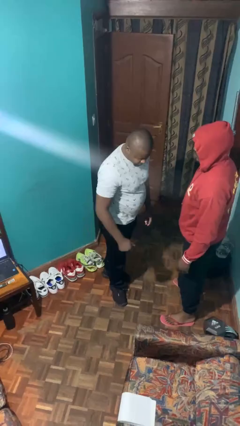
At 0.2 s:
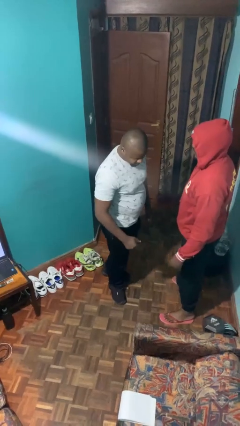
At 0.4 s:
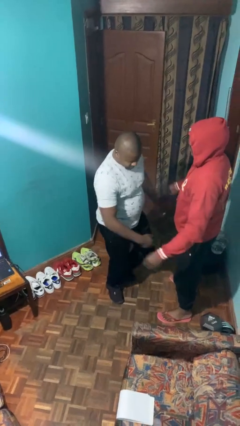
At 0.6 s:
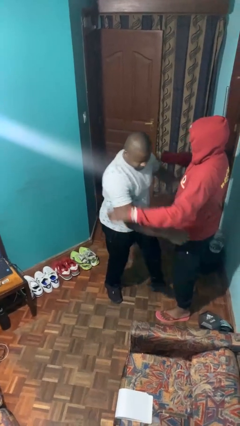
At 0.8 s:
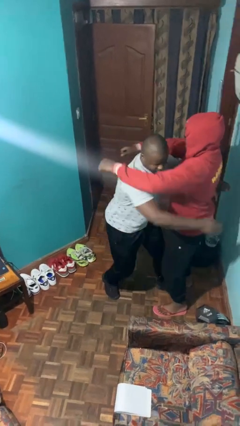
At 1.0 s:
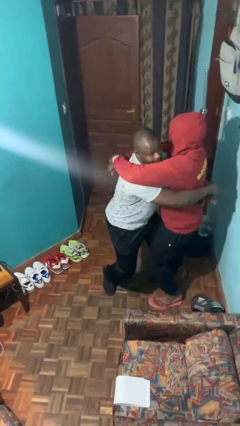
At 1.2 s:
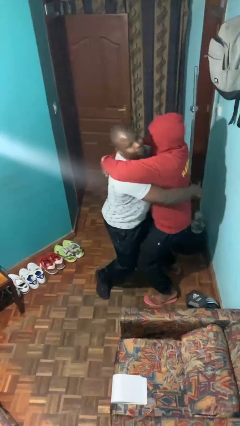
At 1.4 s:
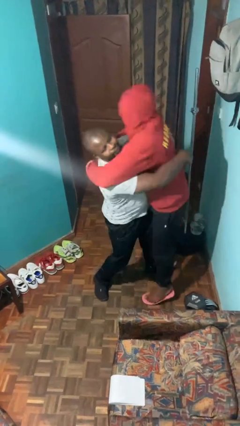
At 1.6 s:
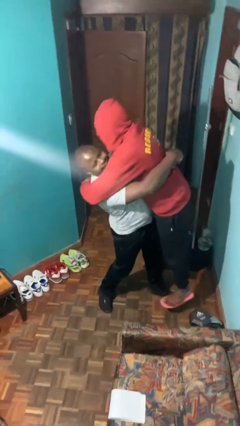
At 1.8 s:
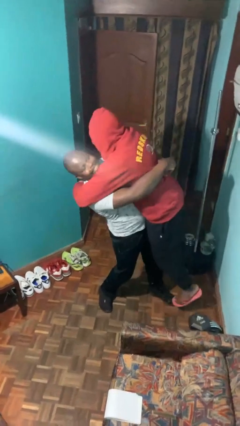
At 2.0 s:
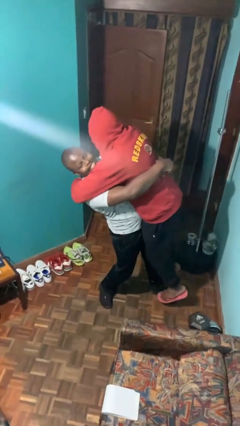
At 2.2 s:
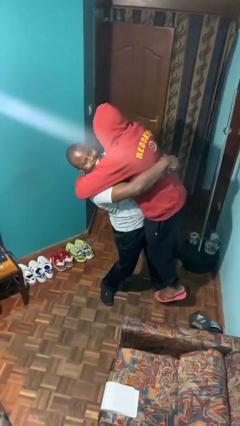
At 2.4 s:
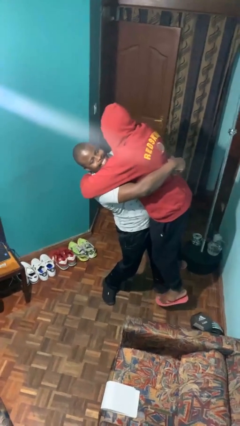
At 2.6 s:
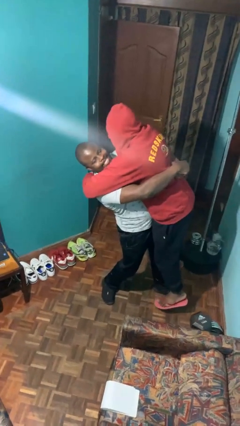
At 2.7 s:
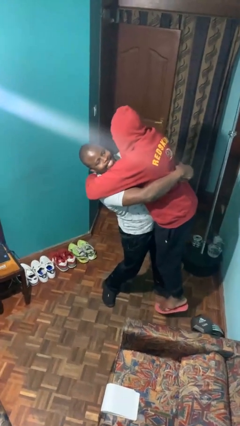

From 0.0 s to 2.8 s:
person picks up person

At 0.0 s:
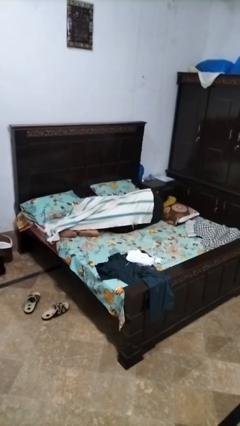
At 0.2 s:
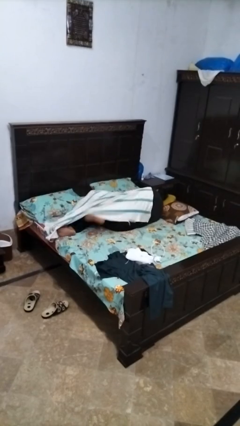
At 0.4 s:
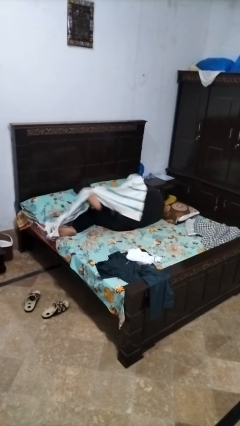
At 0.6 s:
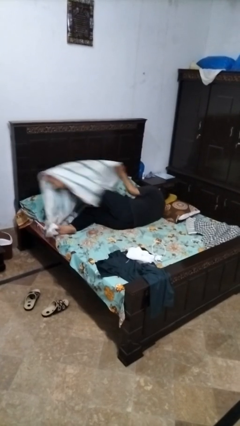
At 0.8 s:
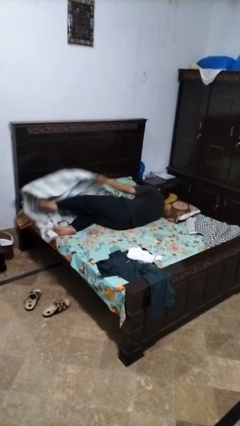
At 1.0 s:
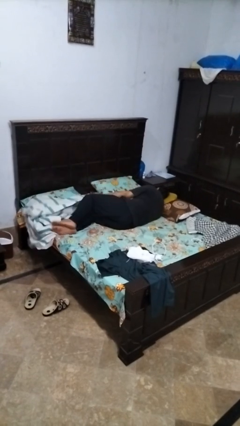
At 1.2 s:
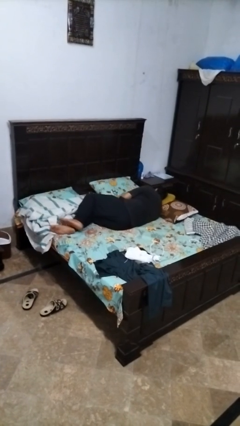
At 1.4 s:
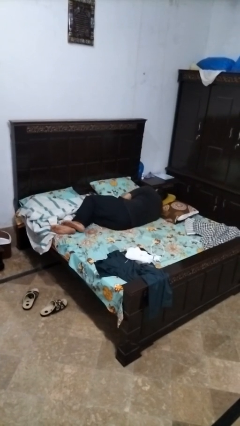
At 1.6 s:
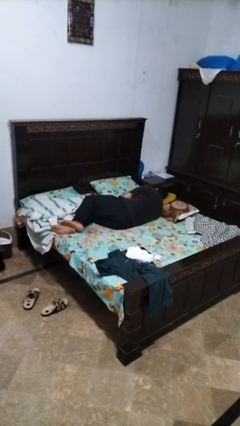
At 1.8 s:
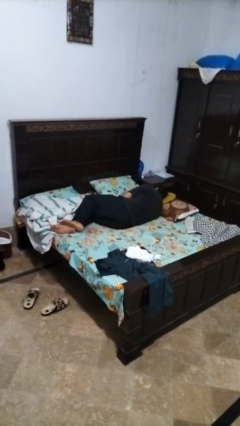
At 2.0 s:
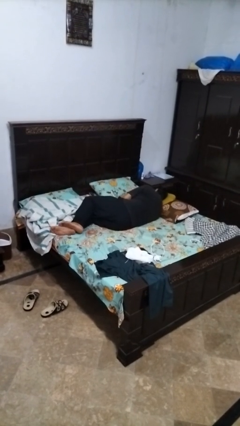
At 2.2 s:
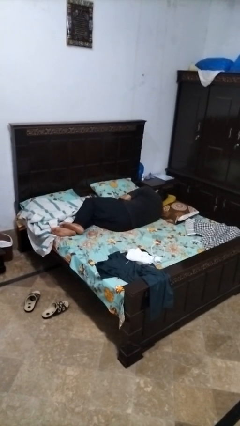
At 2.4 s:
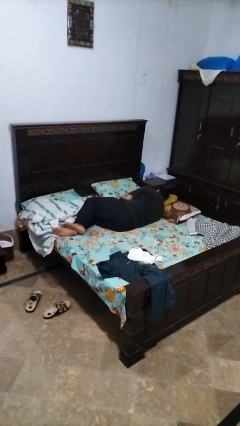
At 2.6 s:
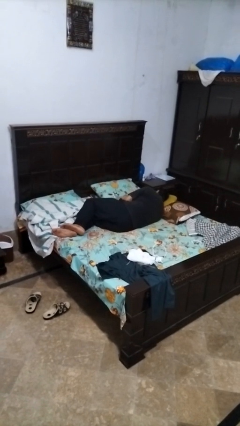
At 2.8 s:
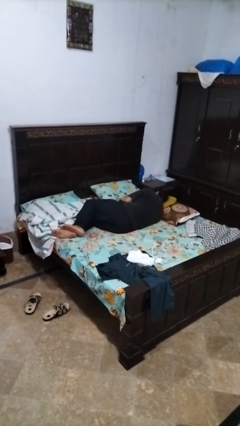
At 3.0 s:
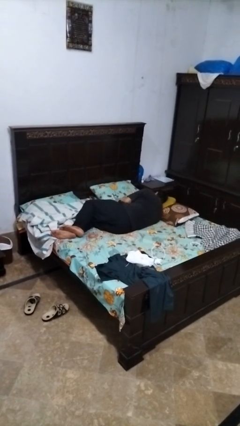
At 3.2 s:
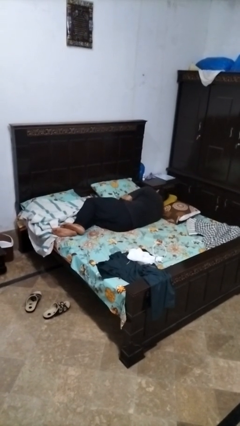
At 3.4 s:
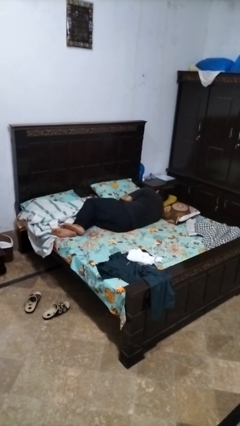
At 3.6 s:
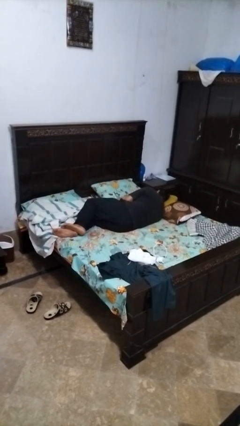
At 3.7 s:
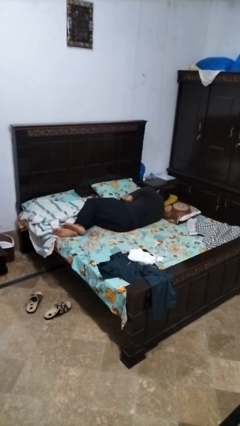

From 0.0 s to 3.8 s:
person uncovers with bedsheets

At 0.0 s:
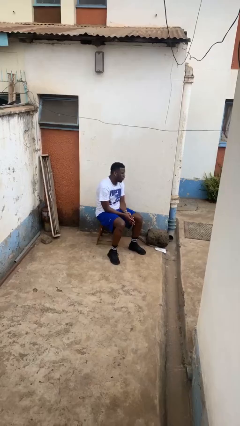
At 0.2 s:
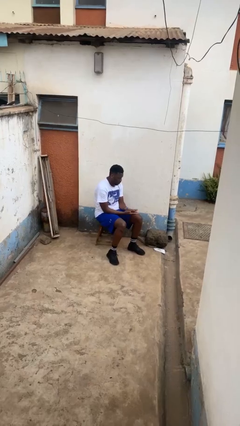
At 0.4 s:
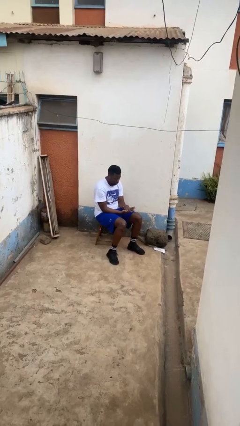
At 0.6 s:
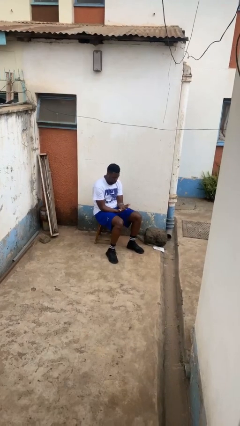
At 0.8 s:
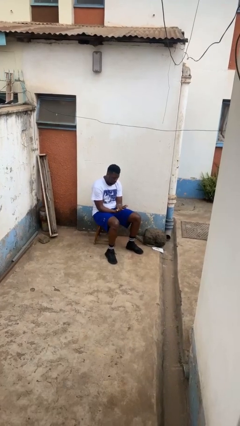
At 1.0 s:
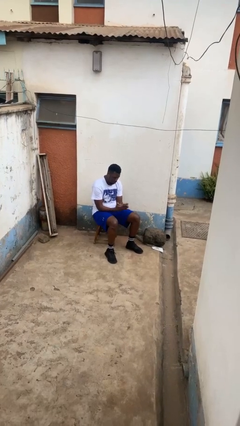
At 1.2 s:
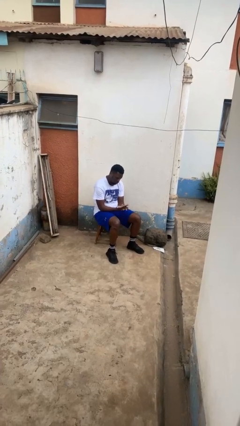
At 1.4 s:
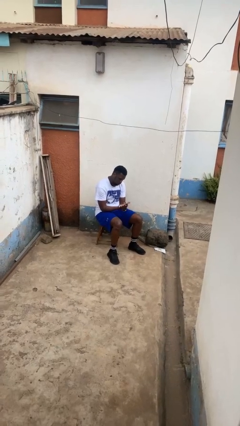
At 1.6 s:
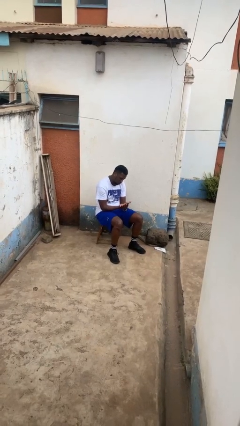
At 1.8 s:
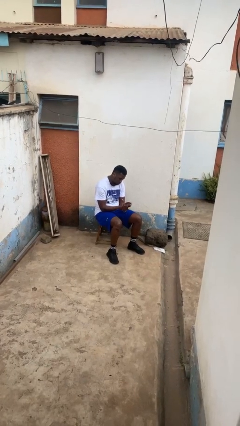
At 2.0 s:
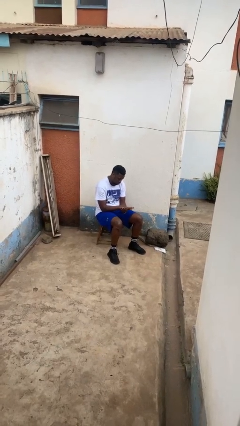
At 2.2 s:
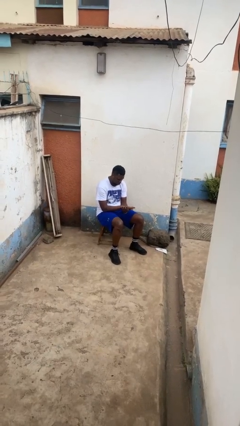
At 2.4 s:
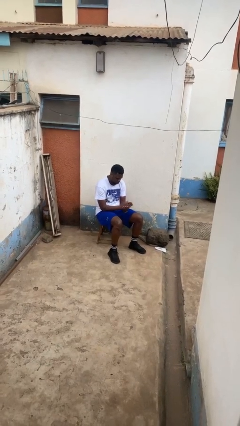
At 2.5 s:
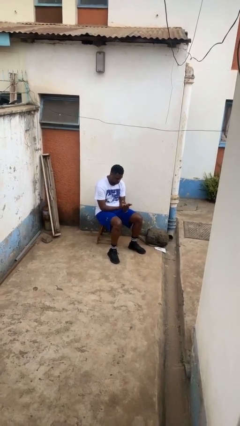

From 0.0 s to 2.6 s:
person looks at hands in lap

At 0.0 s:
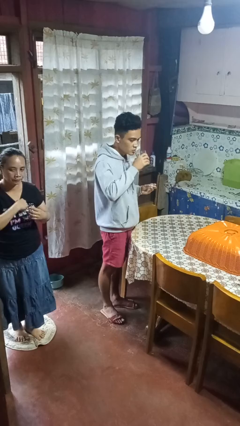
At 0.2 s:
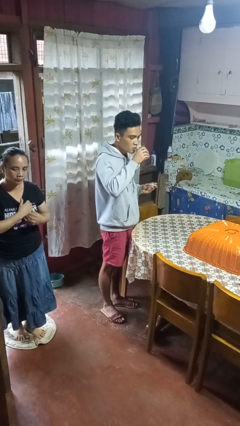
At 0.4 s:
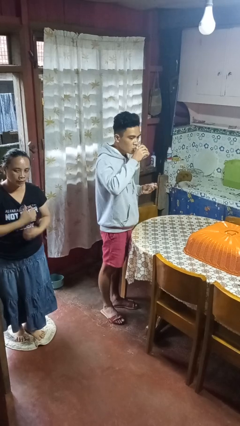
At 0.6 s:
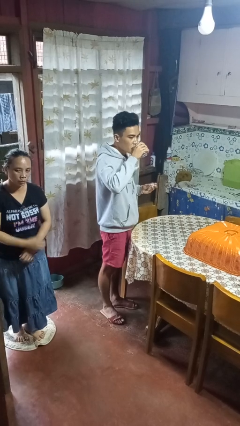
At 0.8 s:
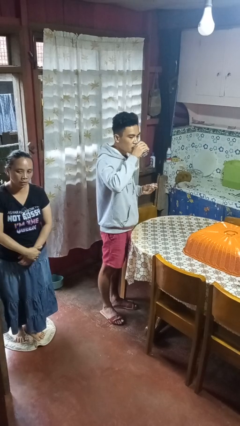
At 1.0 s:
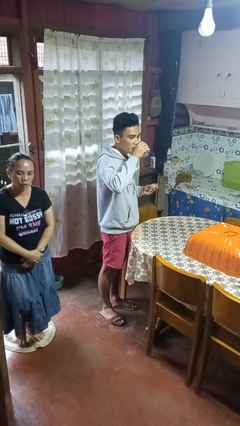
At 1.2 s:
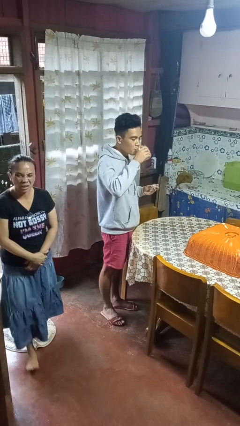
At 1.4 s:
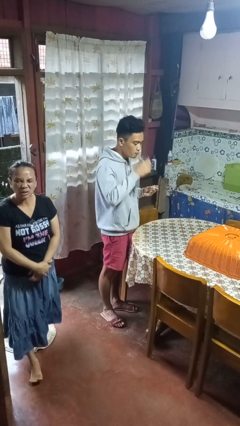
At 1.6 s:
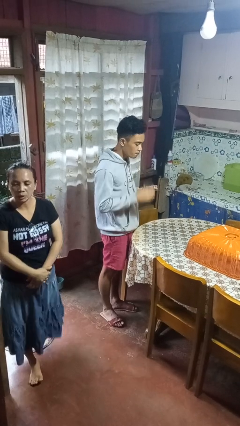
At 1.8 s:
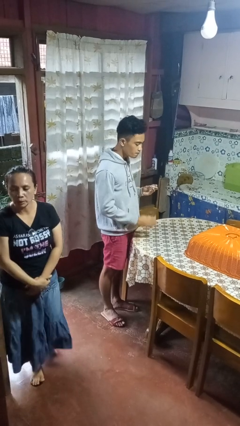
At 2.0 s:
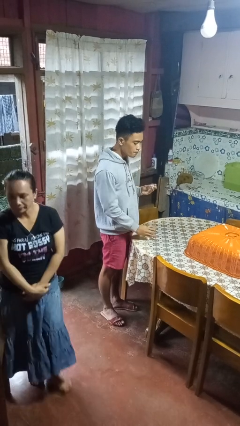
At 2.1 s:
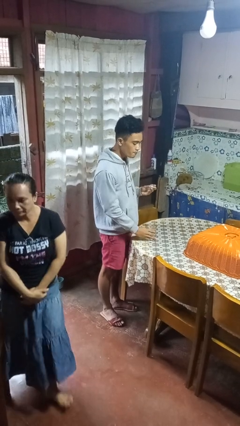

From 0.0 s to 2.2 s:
person drinks from cup

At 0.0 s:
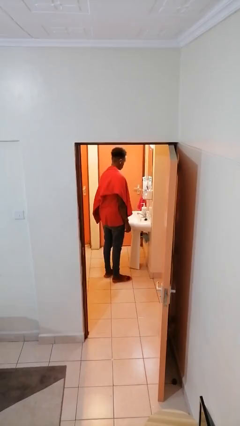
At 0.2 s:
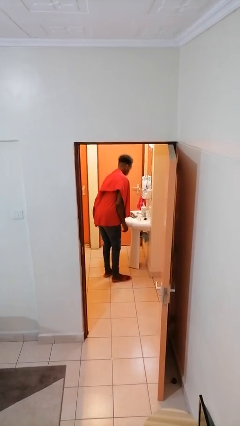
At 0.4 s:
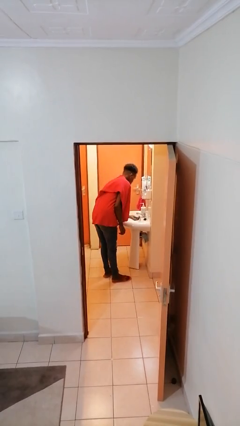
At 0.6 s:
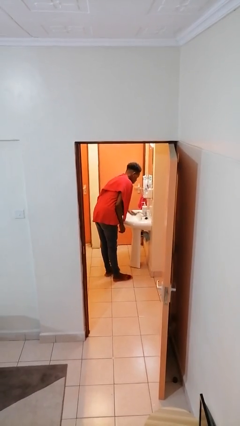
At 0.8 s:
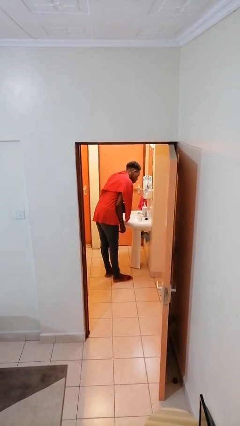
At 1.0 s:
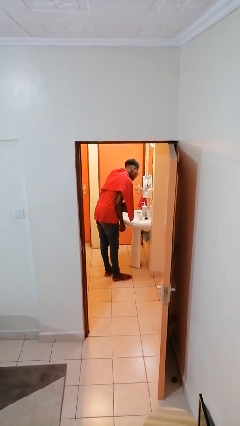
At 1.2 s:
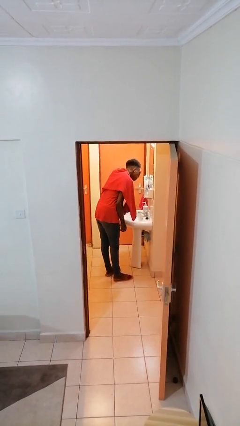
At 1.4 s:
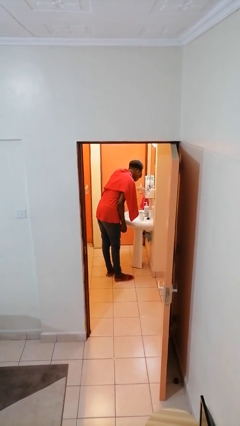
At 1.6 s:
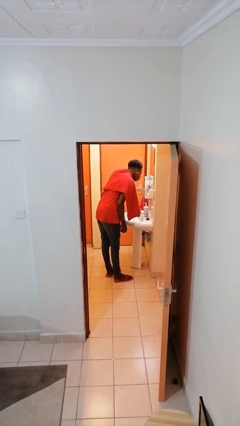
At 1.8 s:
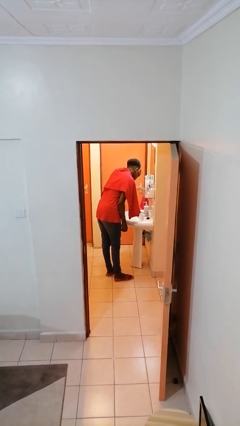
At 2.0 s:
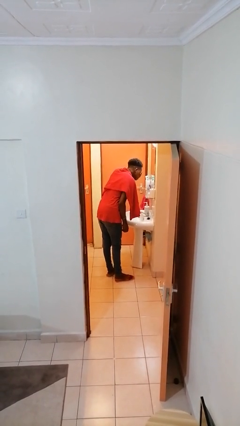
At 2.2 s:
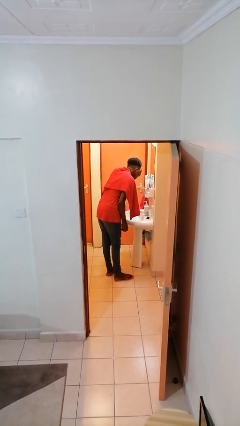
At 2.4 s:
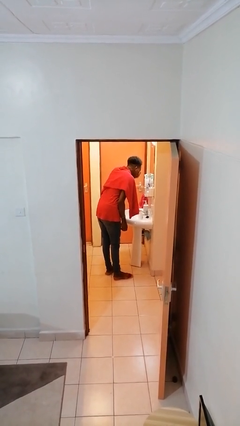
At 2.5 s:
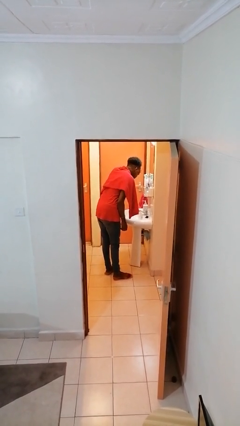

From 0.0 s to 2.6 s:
person washes face

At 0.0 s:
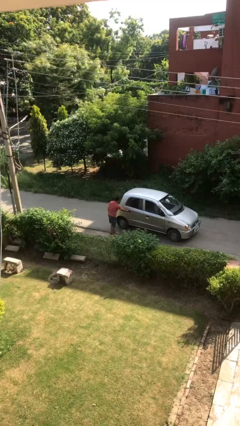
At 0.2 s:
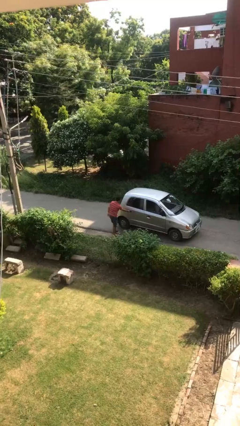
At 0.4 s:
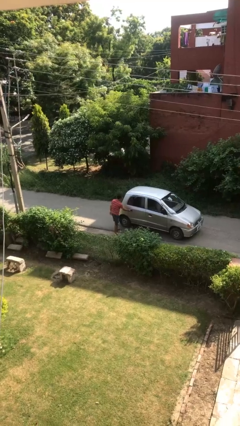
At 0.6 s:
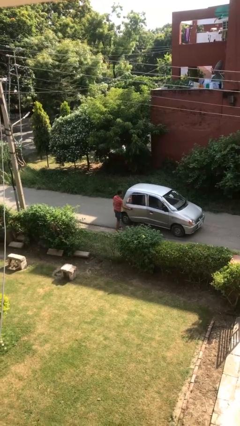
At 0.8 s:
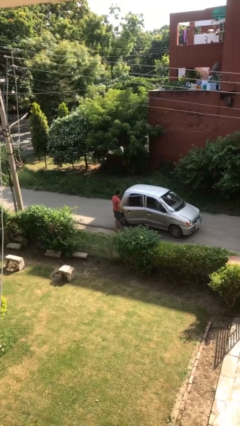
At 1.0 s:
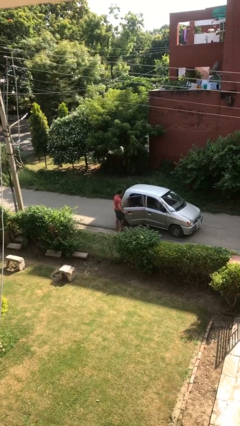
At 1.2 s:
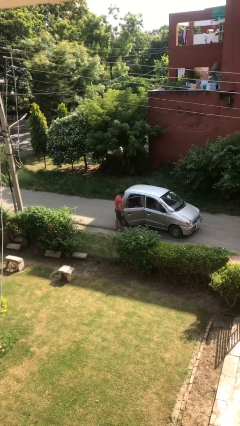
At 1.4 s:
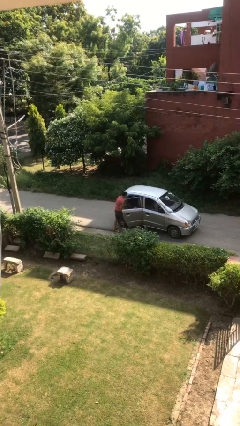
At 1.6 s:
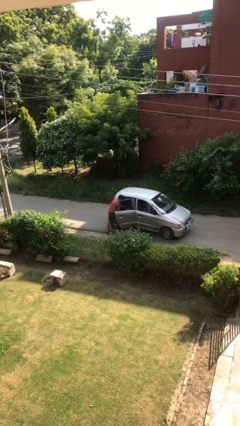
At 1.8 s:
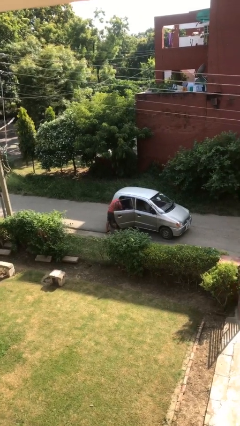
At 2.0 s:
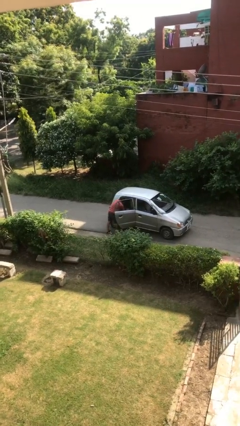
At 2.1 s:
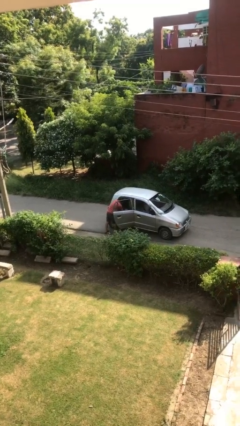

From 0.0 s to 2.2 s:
person opens car door

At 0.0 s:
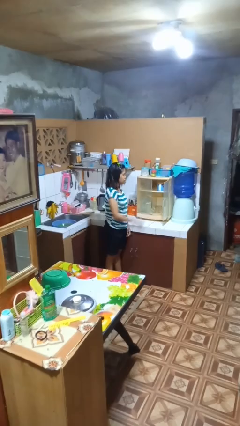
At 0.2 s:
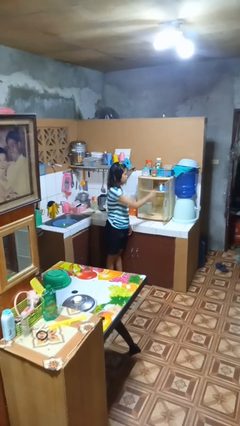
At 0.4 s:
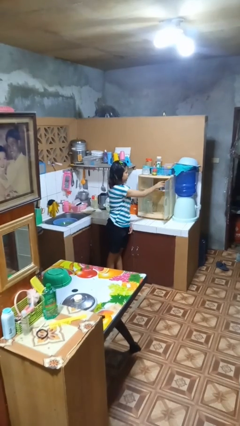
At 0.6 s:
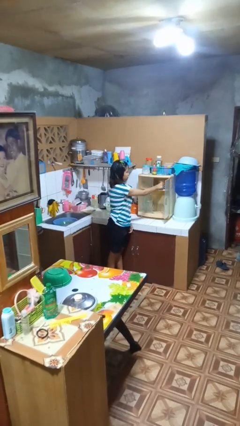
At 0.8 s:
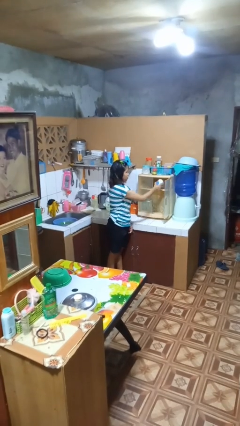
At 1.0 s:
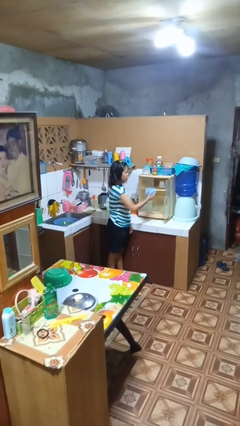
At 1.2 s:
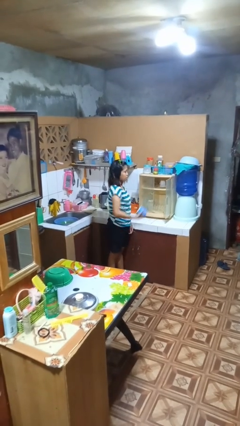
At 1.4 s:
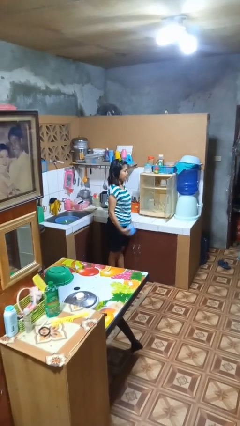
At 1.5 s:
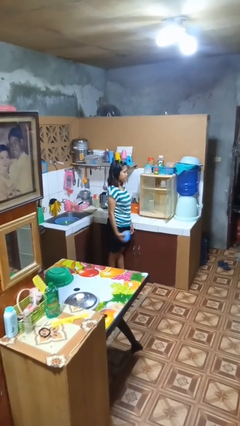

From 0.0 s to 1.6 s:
person takes object from cabinet
